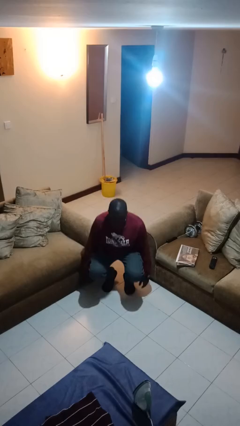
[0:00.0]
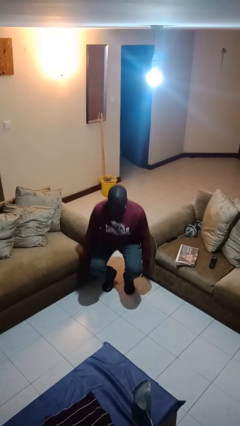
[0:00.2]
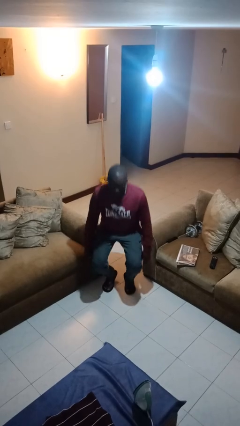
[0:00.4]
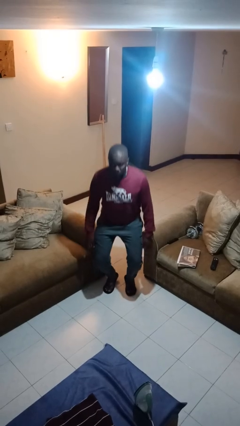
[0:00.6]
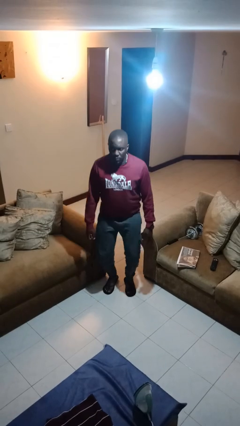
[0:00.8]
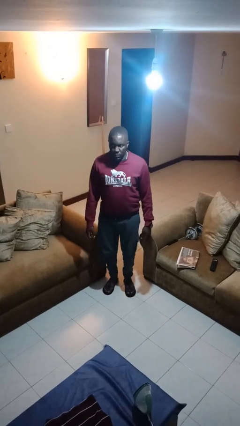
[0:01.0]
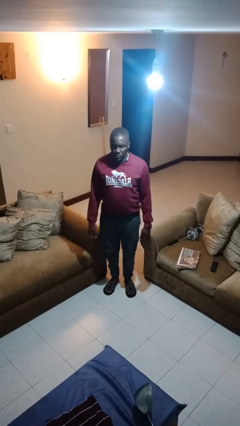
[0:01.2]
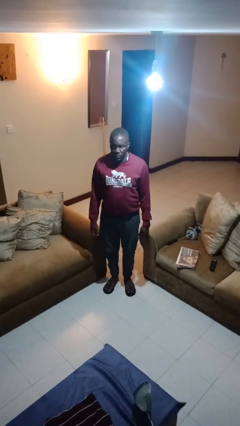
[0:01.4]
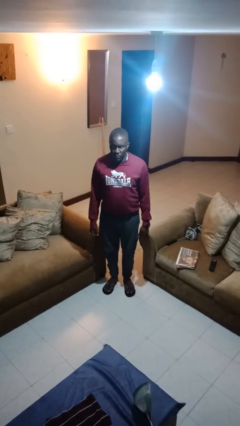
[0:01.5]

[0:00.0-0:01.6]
person stands up

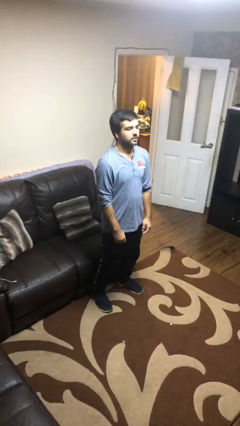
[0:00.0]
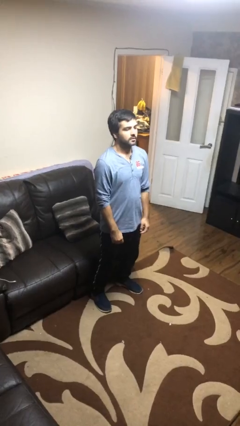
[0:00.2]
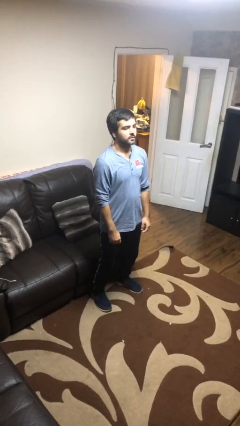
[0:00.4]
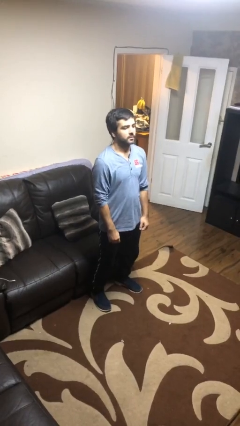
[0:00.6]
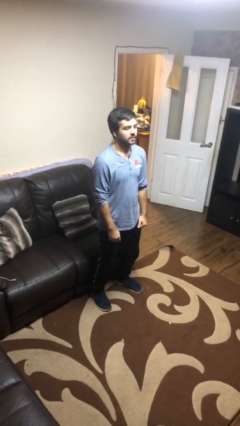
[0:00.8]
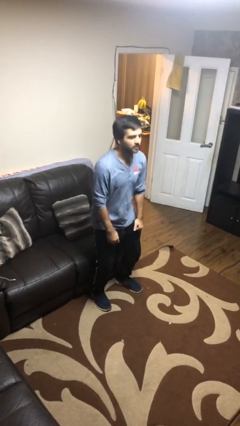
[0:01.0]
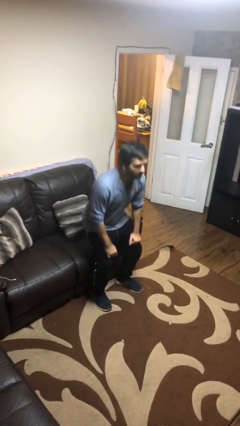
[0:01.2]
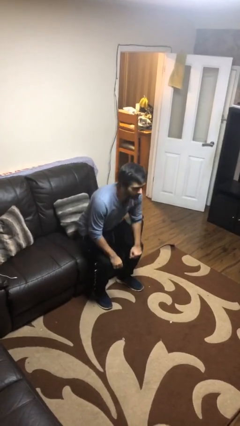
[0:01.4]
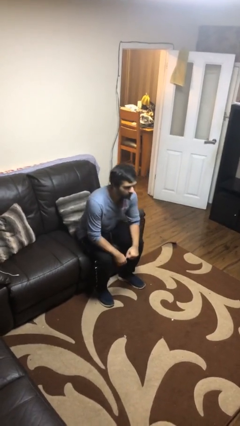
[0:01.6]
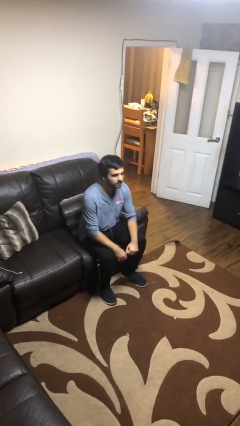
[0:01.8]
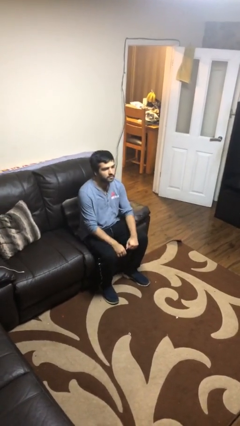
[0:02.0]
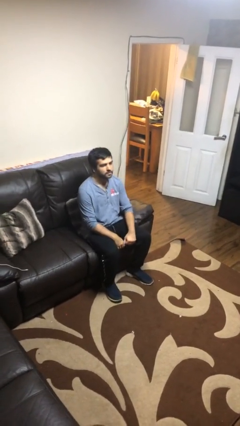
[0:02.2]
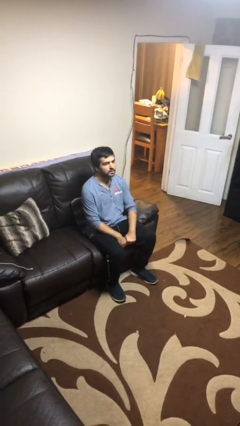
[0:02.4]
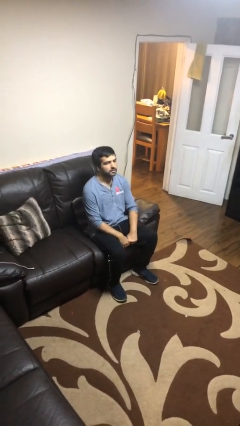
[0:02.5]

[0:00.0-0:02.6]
person sits down

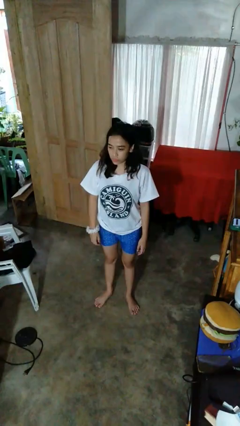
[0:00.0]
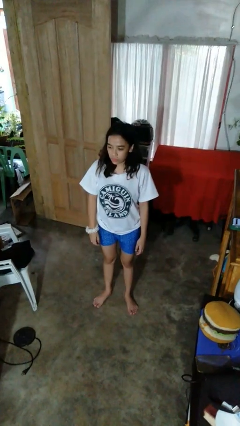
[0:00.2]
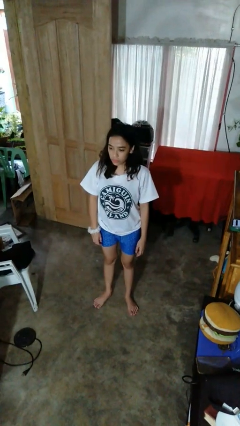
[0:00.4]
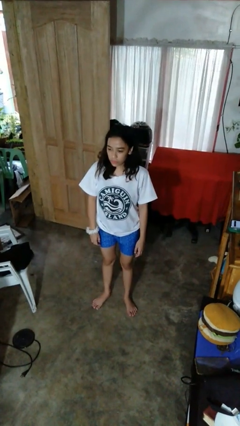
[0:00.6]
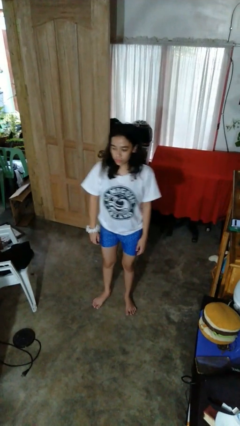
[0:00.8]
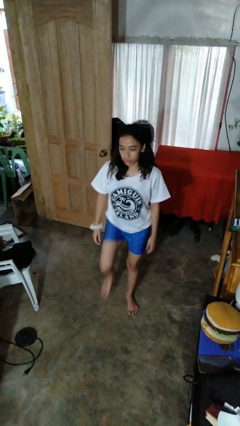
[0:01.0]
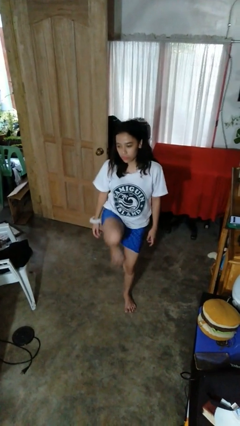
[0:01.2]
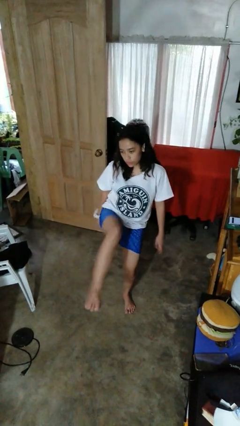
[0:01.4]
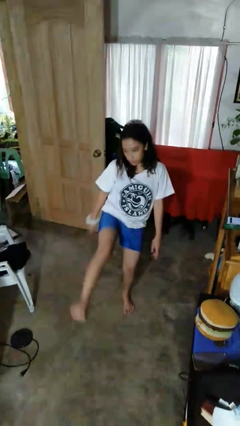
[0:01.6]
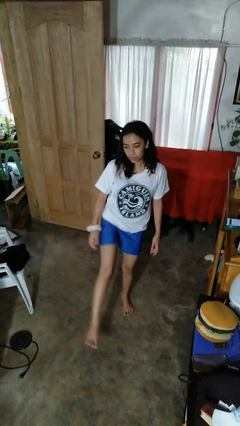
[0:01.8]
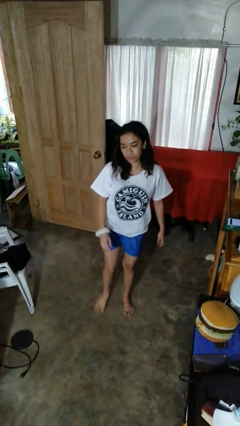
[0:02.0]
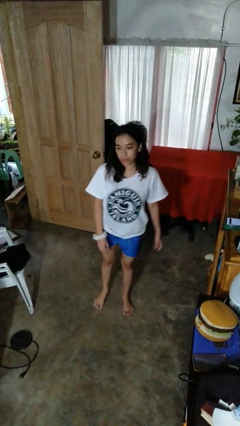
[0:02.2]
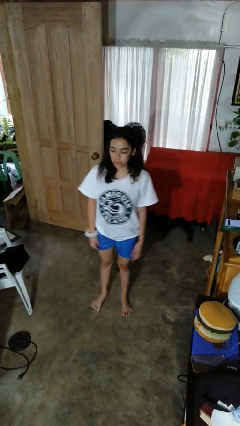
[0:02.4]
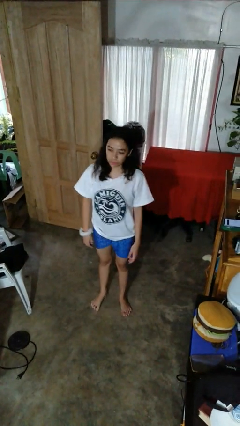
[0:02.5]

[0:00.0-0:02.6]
person karate kicks

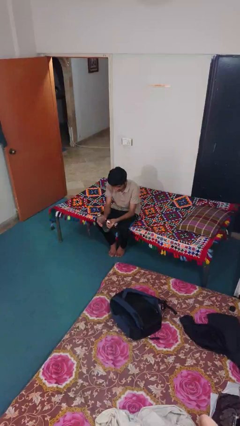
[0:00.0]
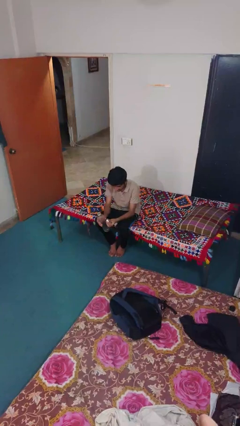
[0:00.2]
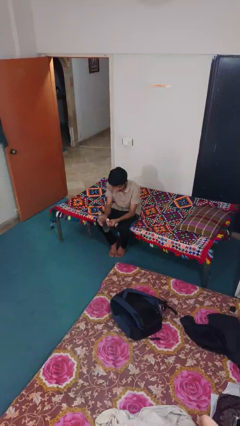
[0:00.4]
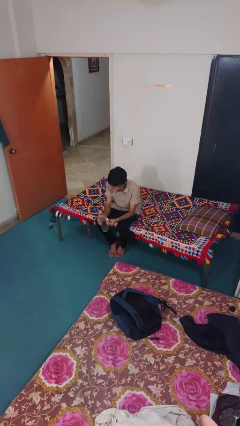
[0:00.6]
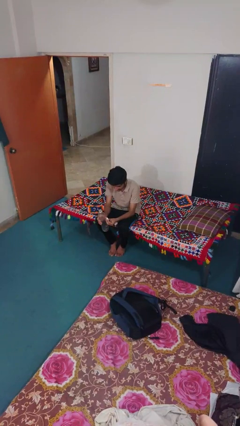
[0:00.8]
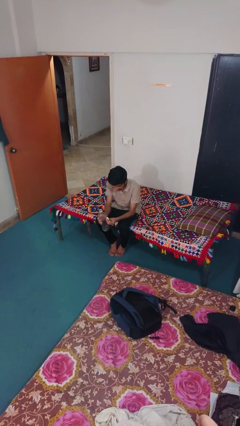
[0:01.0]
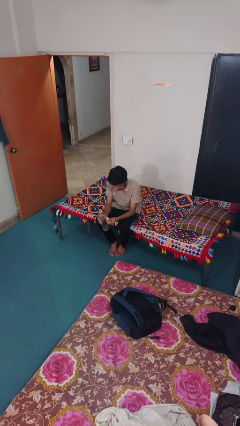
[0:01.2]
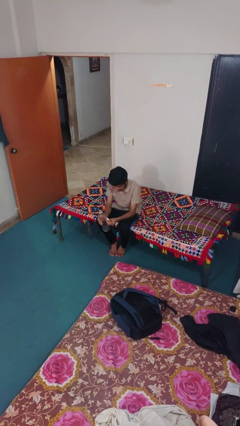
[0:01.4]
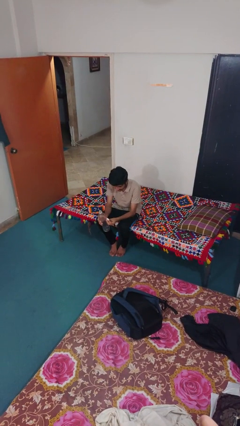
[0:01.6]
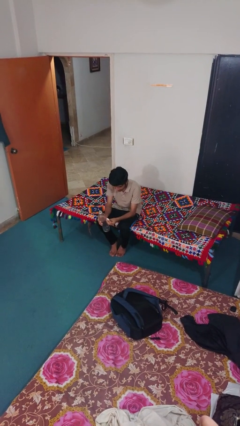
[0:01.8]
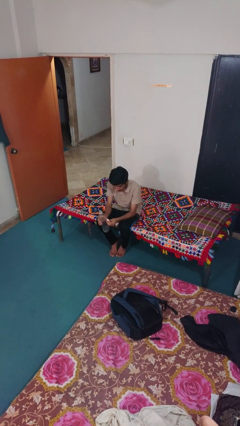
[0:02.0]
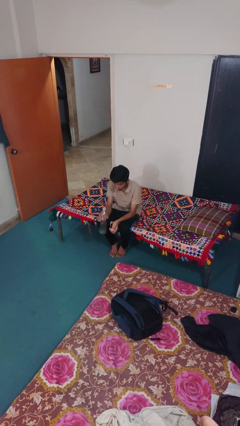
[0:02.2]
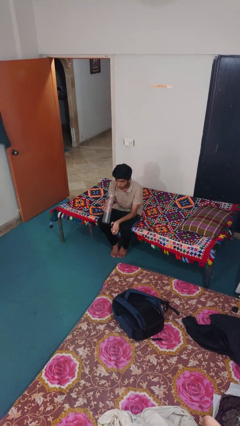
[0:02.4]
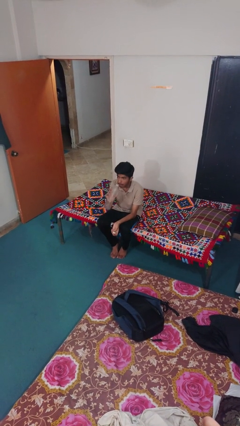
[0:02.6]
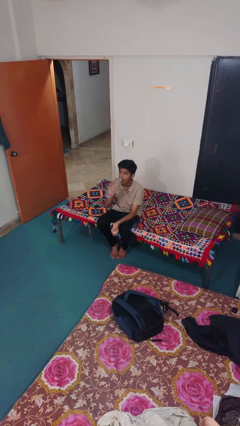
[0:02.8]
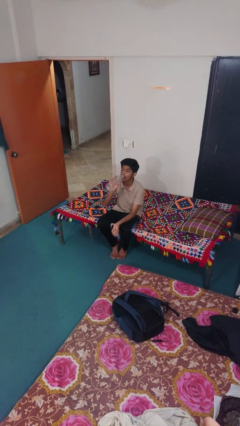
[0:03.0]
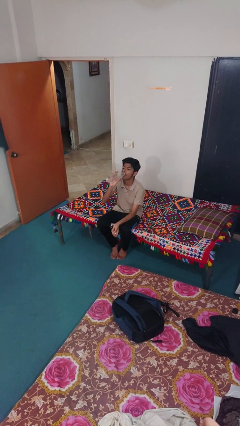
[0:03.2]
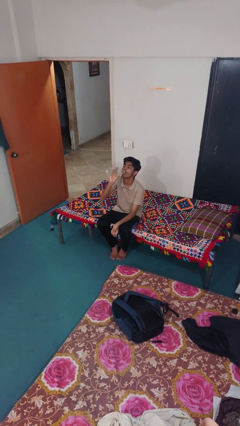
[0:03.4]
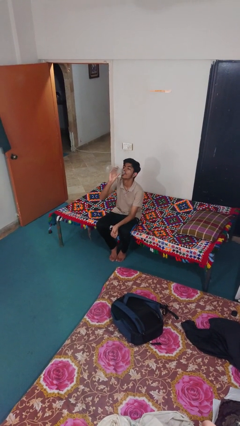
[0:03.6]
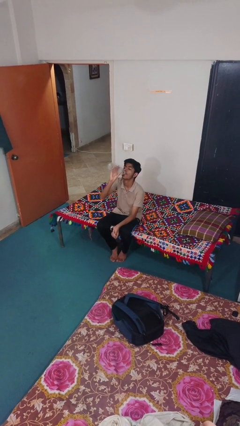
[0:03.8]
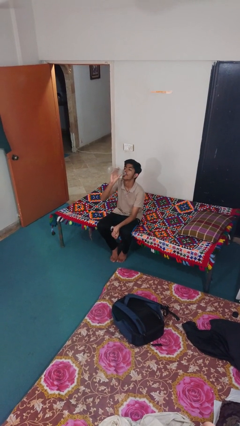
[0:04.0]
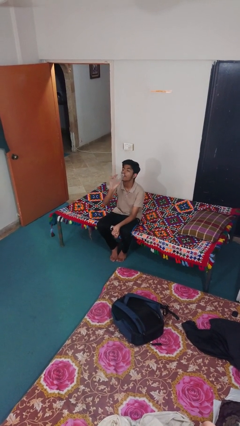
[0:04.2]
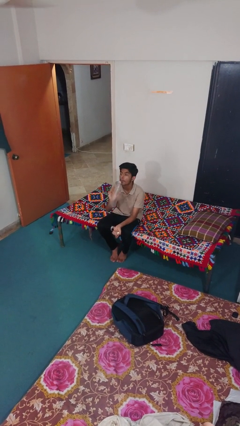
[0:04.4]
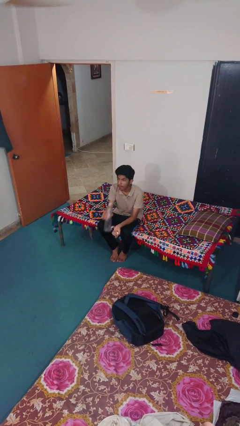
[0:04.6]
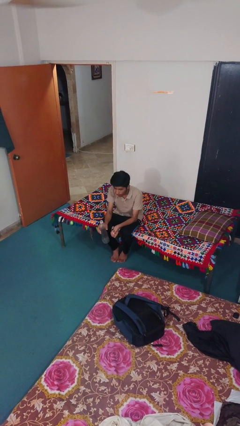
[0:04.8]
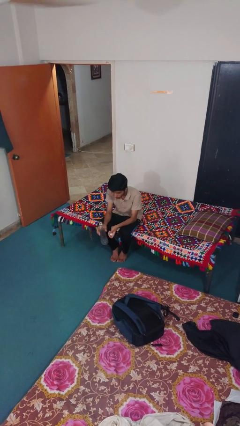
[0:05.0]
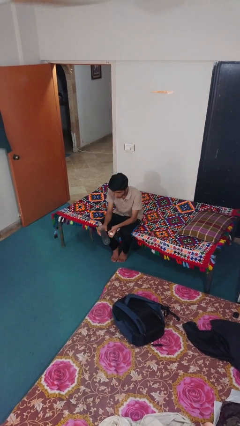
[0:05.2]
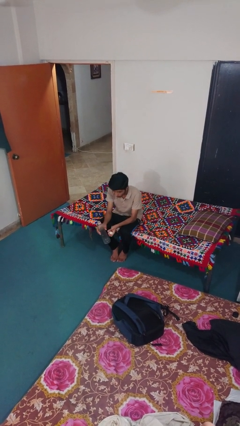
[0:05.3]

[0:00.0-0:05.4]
person drinks from bottle

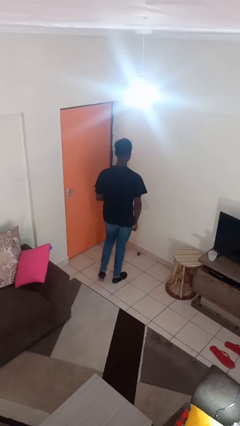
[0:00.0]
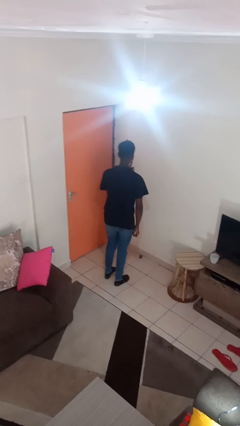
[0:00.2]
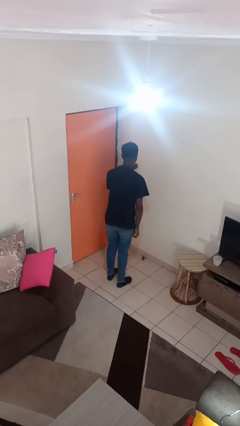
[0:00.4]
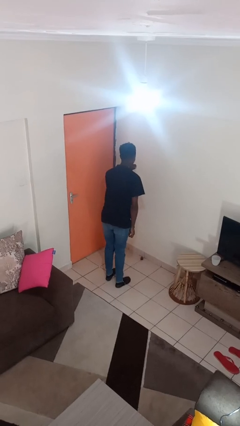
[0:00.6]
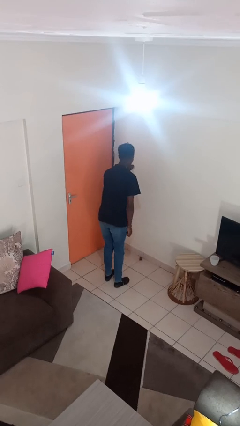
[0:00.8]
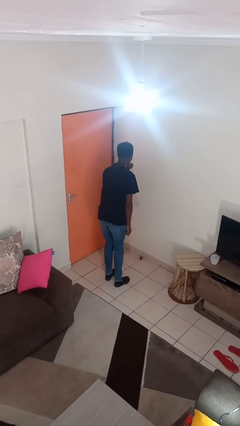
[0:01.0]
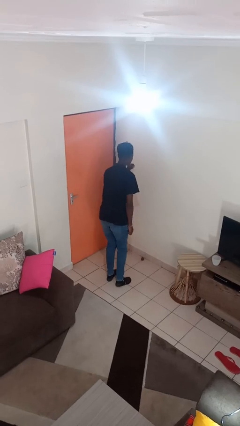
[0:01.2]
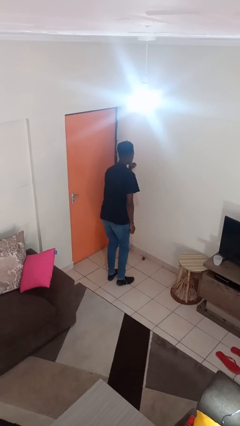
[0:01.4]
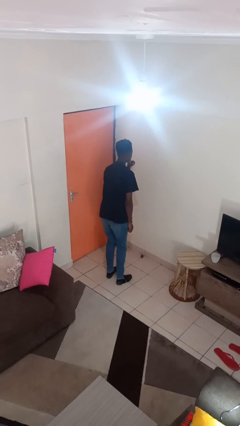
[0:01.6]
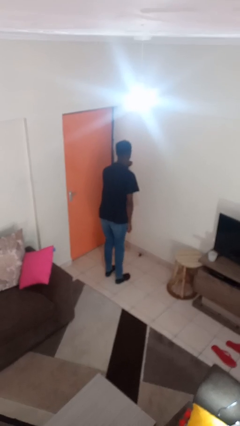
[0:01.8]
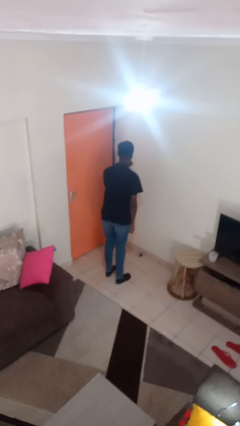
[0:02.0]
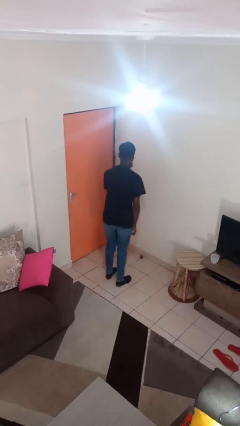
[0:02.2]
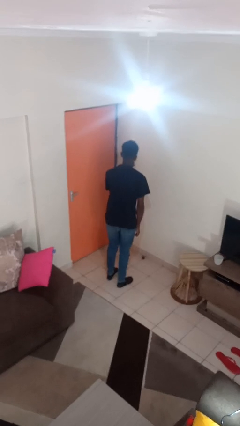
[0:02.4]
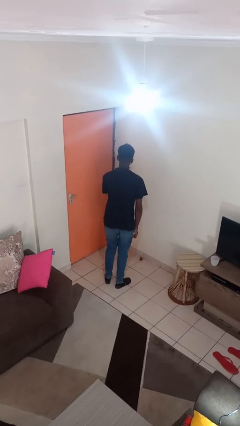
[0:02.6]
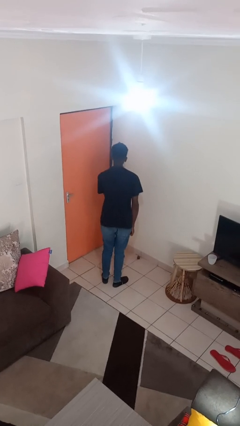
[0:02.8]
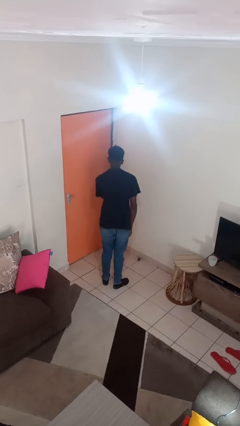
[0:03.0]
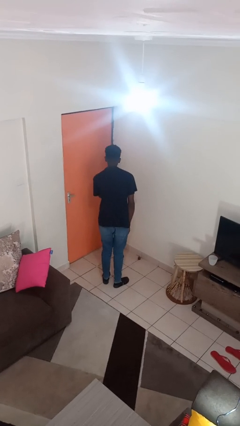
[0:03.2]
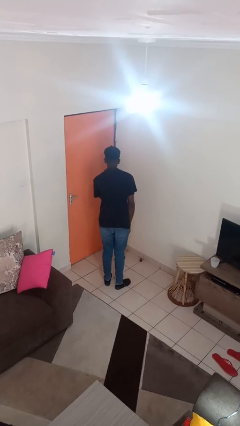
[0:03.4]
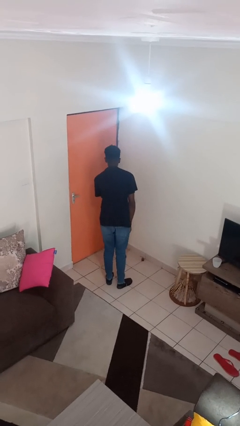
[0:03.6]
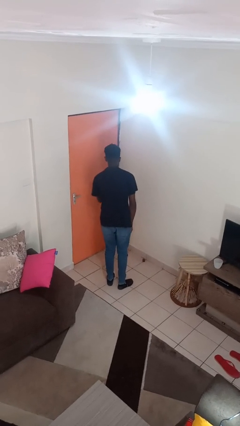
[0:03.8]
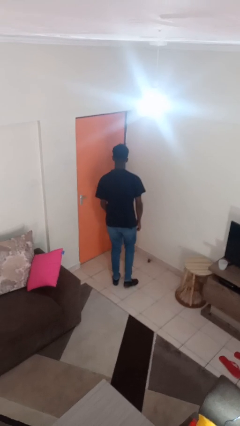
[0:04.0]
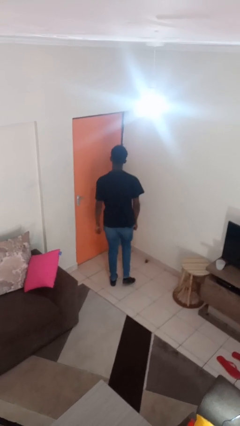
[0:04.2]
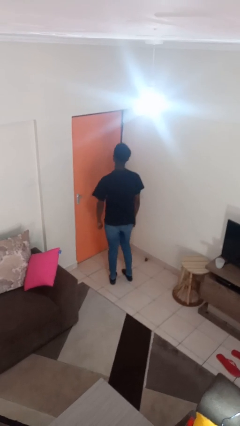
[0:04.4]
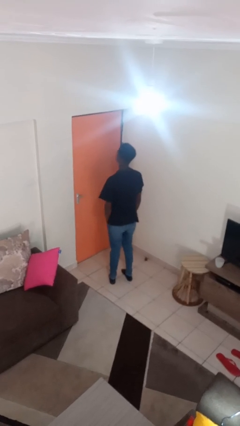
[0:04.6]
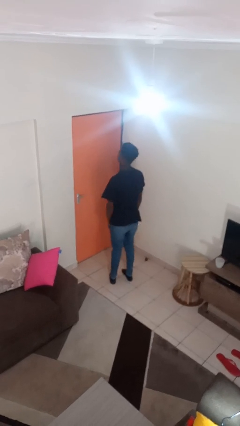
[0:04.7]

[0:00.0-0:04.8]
person gestures be quiet

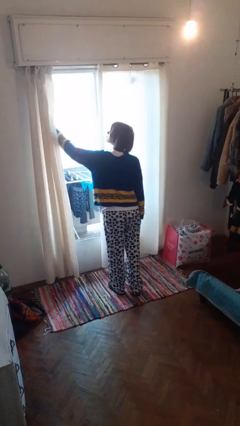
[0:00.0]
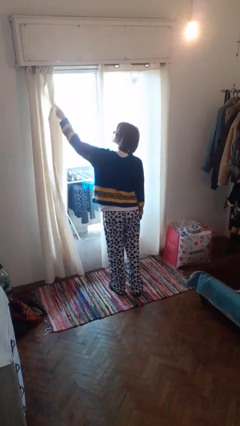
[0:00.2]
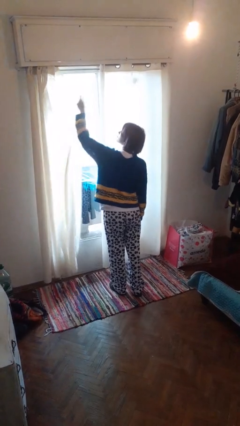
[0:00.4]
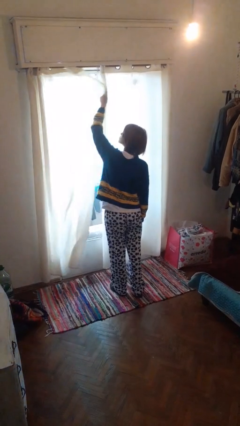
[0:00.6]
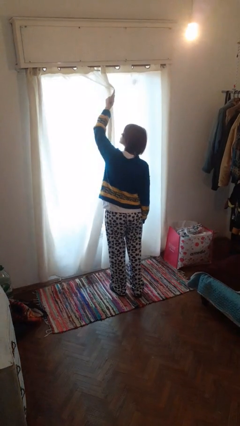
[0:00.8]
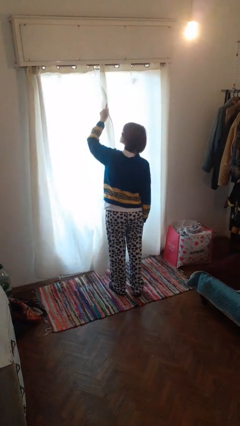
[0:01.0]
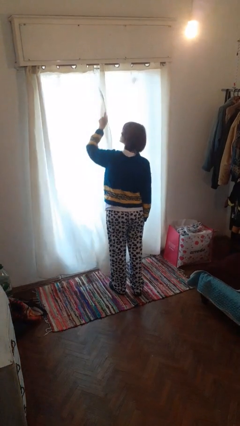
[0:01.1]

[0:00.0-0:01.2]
person closes curtains
